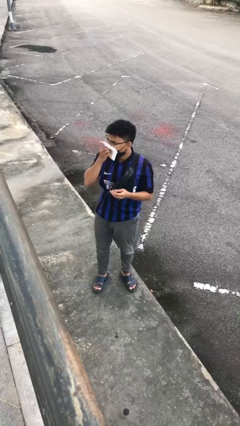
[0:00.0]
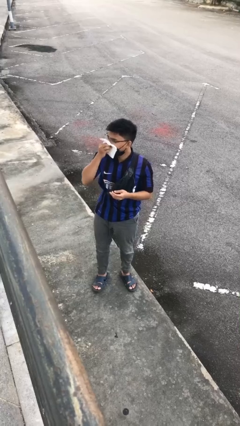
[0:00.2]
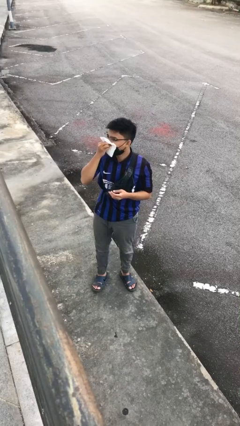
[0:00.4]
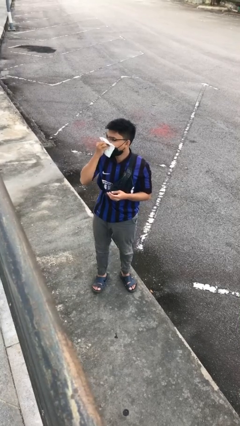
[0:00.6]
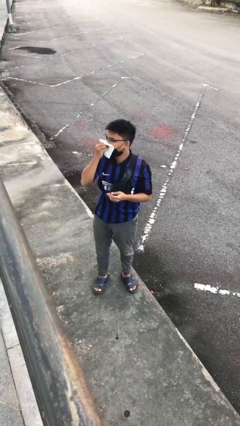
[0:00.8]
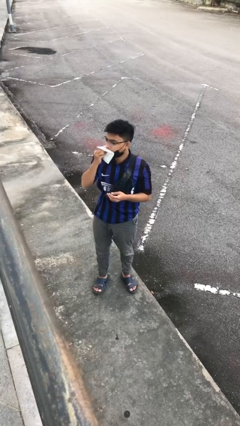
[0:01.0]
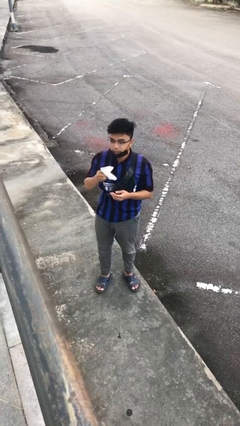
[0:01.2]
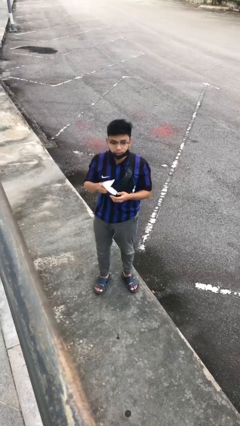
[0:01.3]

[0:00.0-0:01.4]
person blows nose

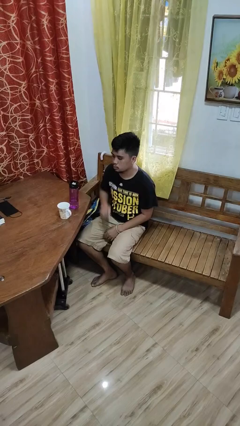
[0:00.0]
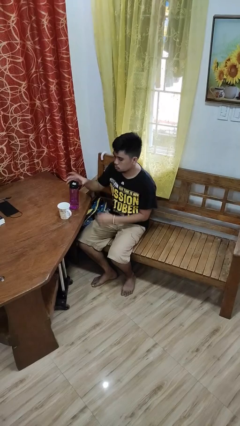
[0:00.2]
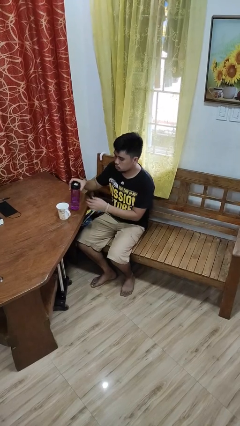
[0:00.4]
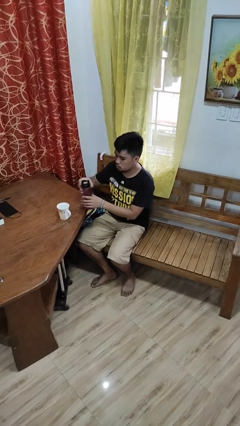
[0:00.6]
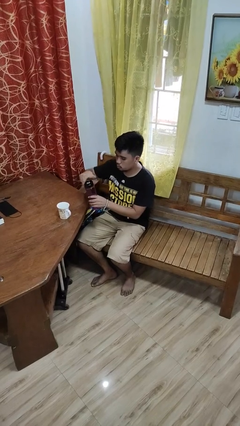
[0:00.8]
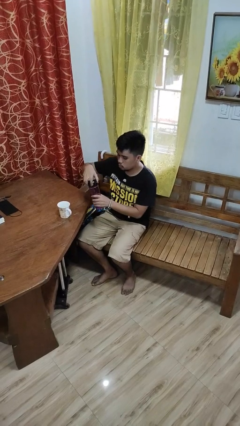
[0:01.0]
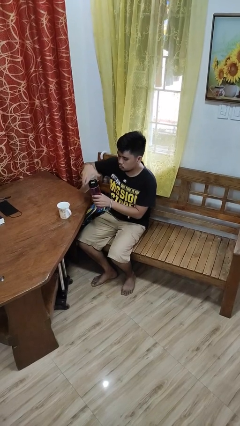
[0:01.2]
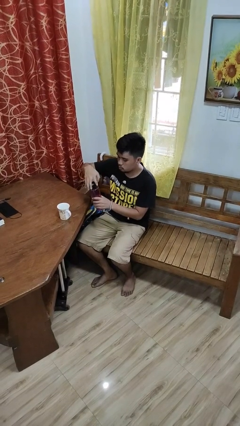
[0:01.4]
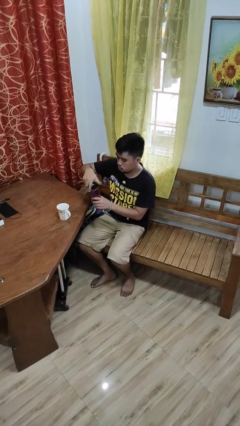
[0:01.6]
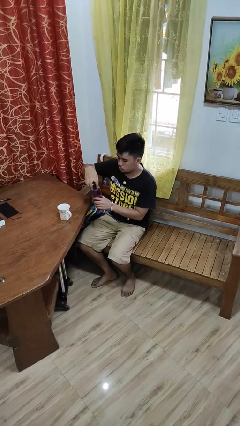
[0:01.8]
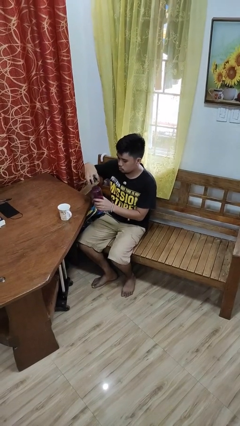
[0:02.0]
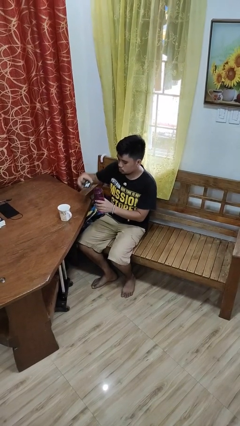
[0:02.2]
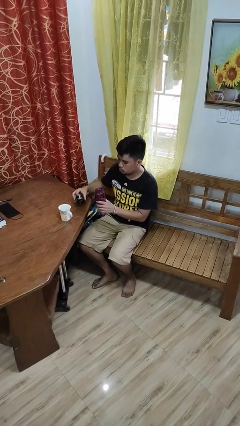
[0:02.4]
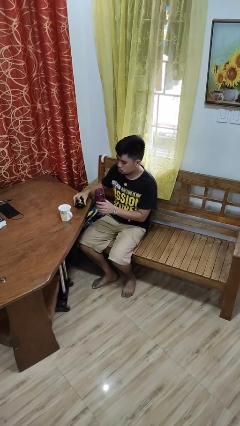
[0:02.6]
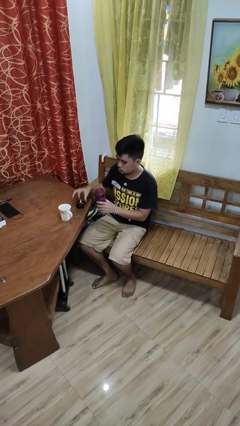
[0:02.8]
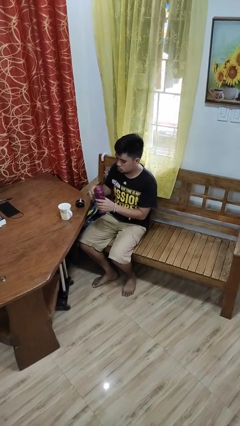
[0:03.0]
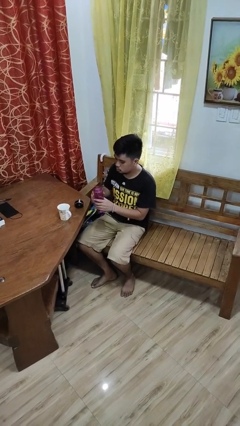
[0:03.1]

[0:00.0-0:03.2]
person unscrews lid from bottle

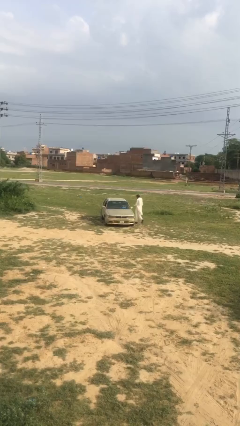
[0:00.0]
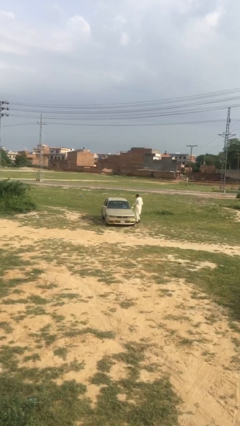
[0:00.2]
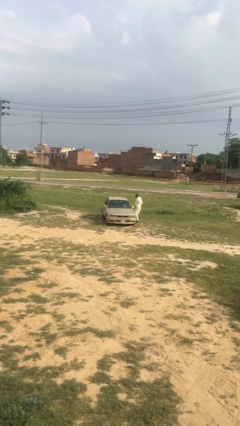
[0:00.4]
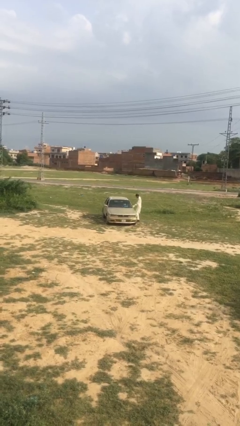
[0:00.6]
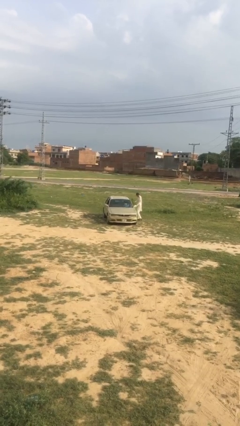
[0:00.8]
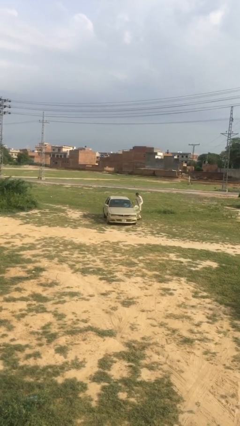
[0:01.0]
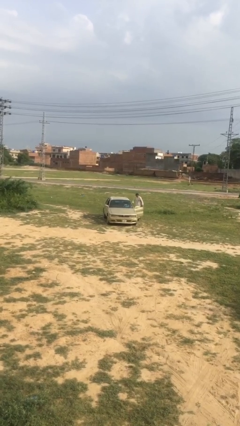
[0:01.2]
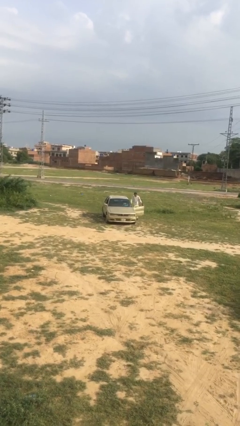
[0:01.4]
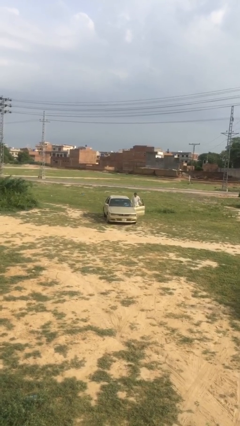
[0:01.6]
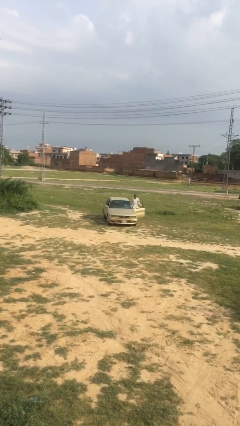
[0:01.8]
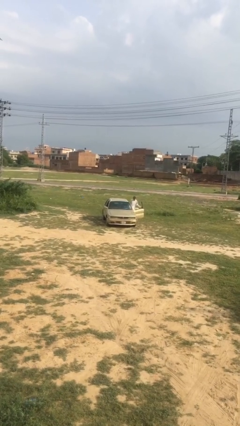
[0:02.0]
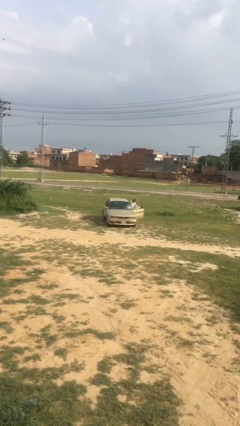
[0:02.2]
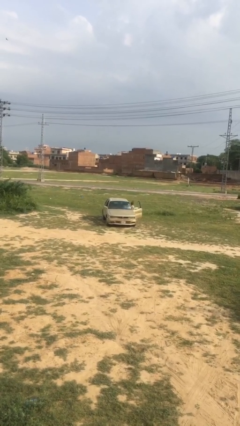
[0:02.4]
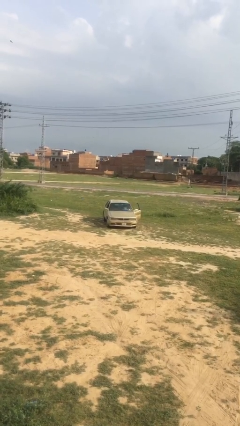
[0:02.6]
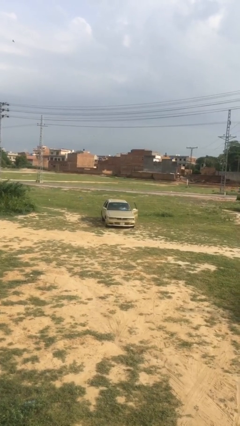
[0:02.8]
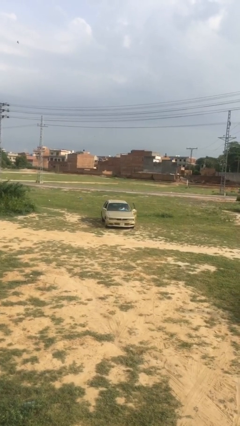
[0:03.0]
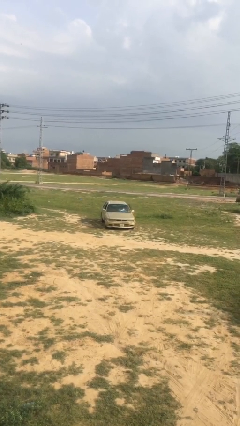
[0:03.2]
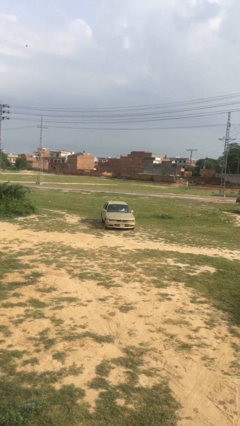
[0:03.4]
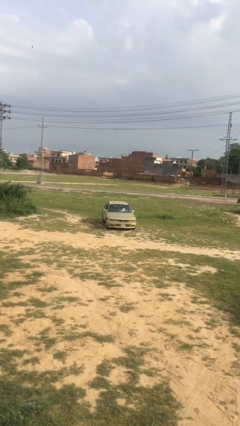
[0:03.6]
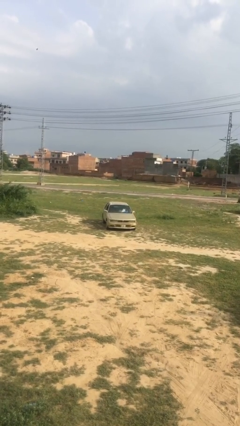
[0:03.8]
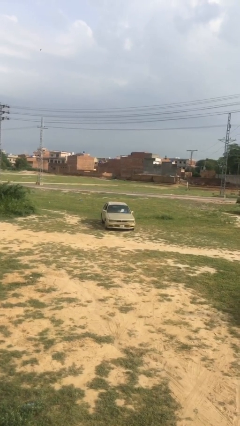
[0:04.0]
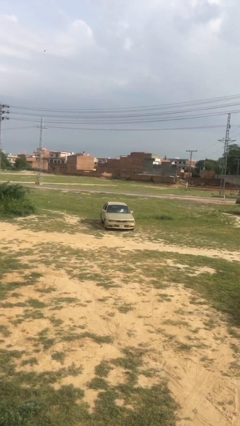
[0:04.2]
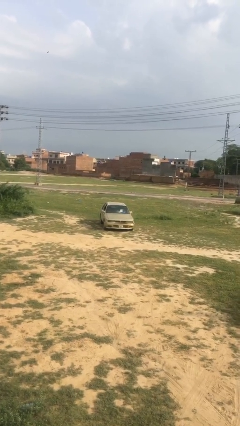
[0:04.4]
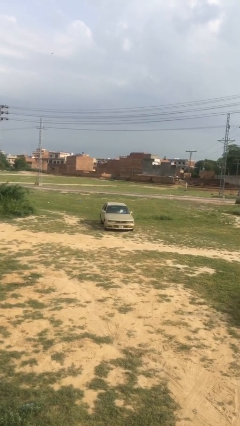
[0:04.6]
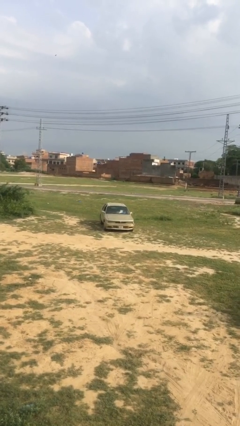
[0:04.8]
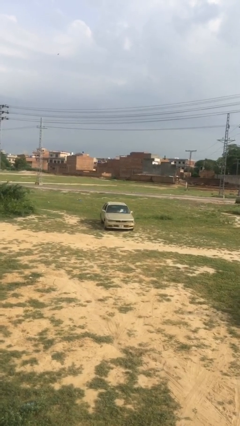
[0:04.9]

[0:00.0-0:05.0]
car picks up person

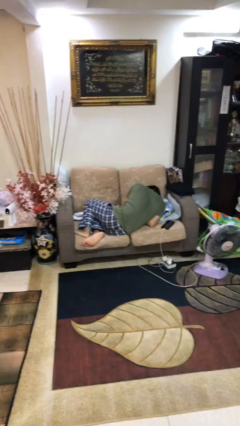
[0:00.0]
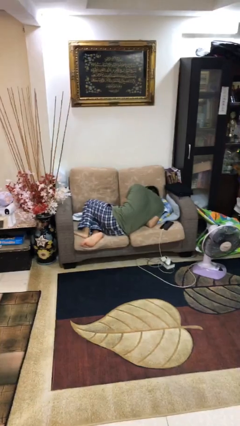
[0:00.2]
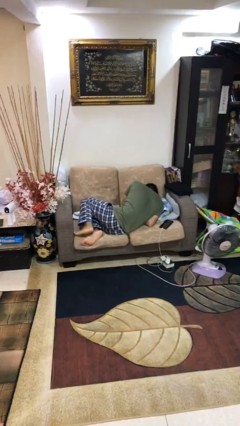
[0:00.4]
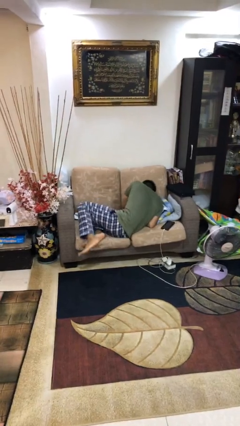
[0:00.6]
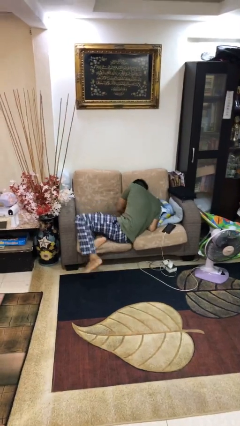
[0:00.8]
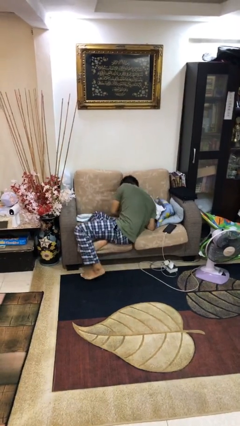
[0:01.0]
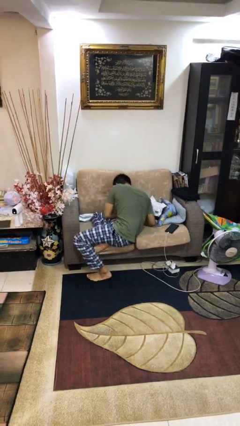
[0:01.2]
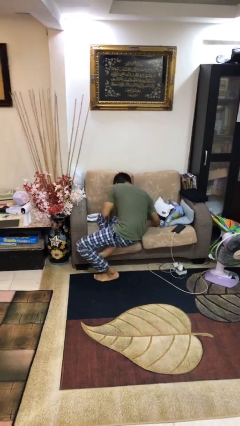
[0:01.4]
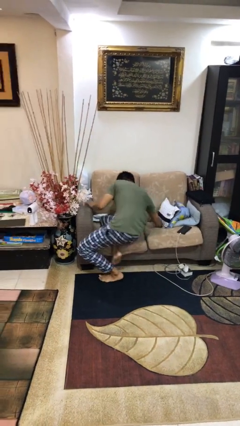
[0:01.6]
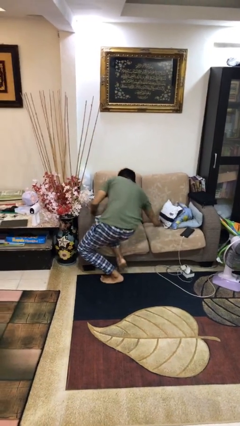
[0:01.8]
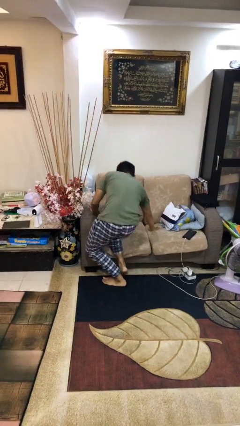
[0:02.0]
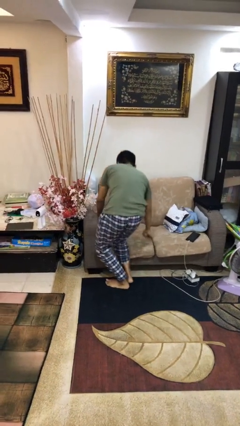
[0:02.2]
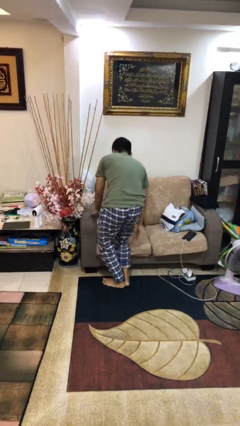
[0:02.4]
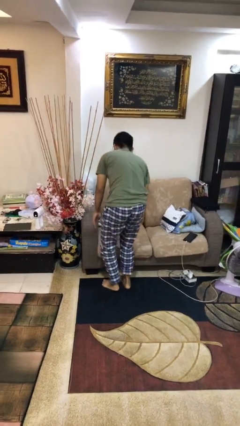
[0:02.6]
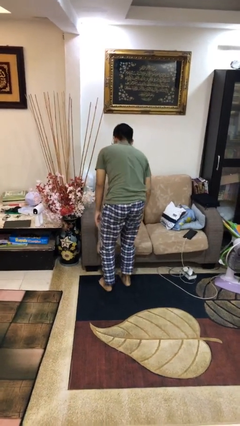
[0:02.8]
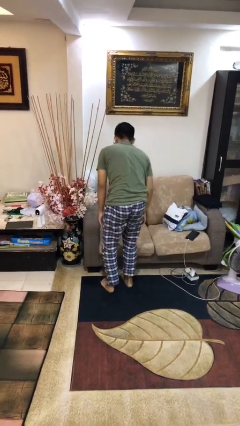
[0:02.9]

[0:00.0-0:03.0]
person stands up

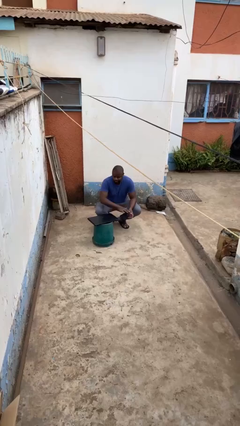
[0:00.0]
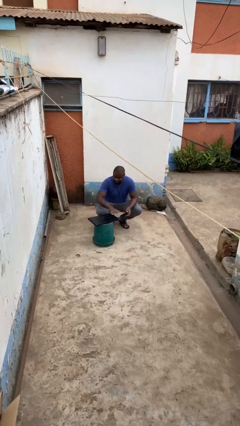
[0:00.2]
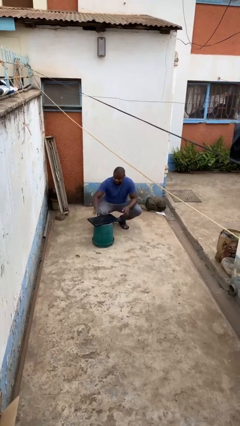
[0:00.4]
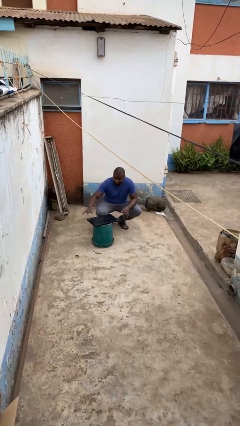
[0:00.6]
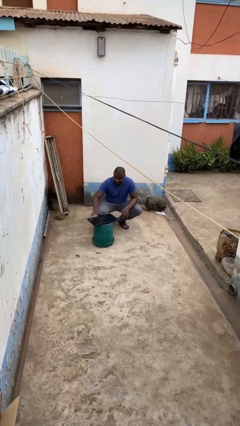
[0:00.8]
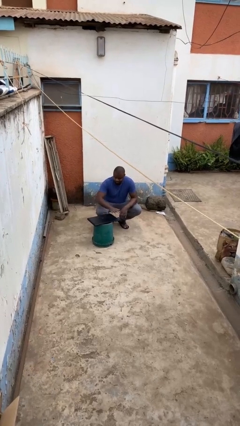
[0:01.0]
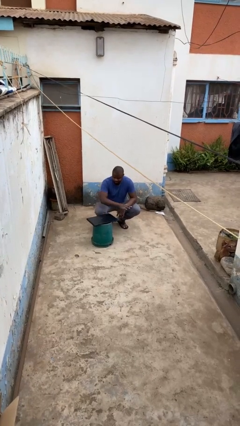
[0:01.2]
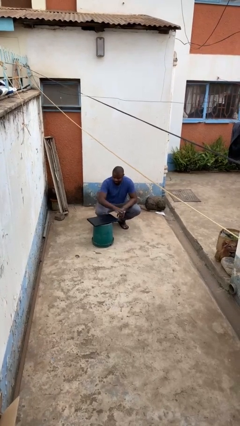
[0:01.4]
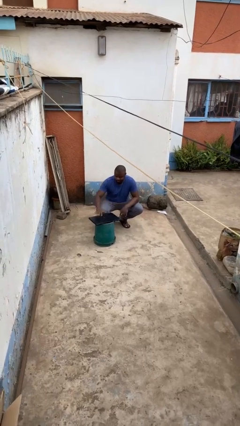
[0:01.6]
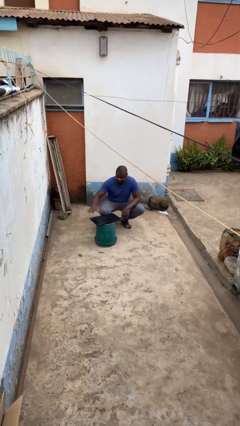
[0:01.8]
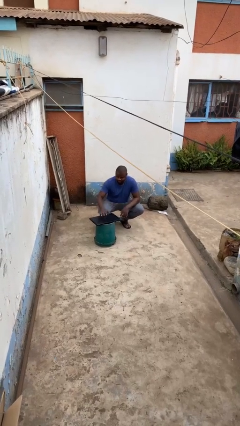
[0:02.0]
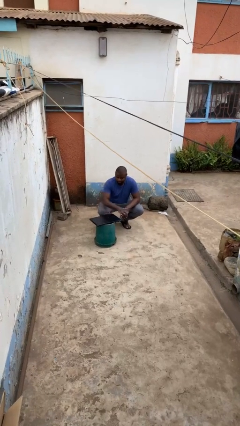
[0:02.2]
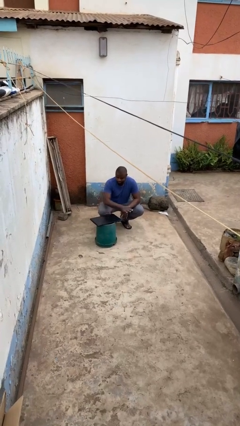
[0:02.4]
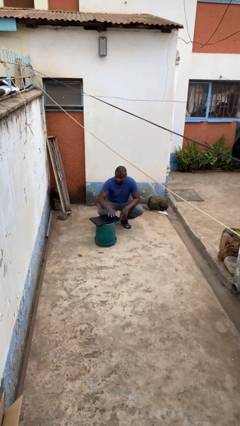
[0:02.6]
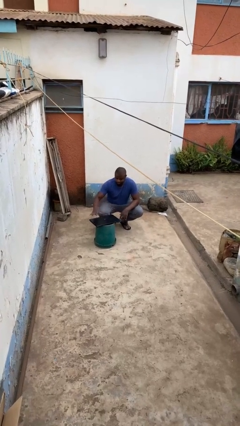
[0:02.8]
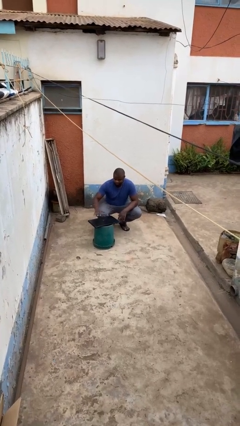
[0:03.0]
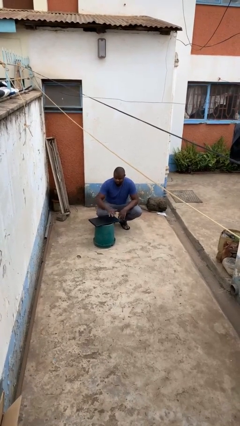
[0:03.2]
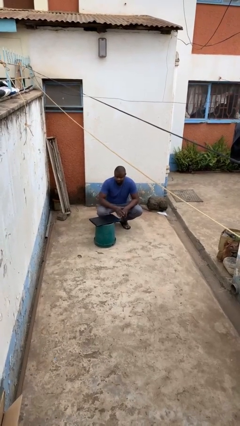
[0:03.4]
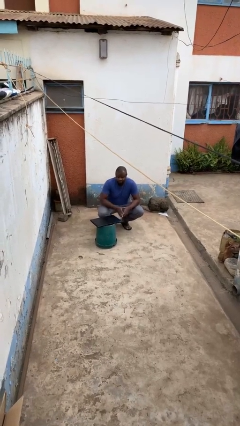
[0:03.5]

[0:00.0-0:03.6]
person waves hand over object

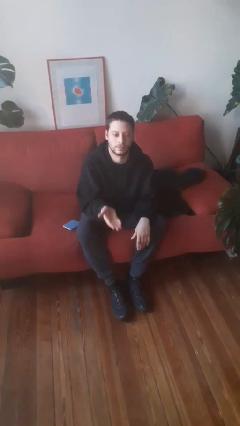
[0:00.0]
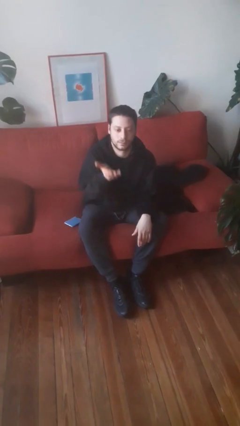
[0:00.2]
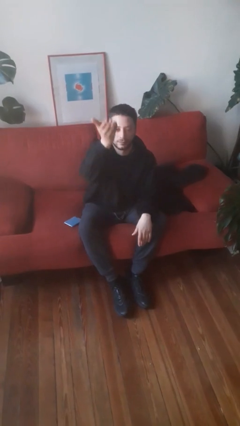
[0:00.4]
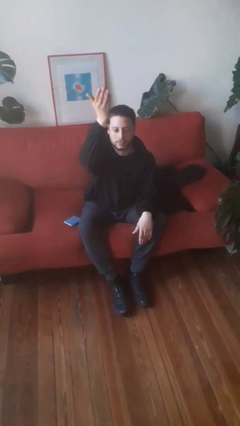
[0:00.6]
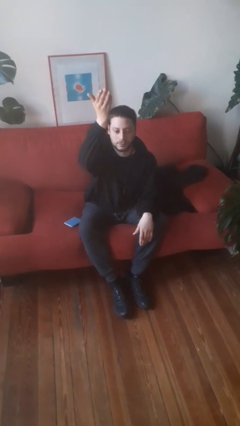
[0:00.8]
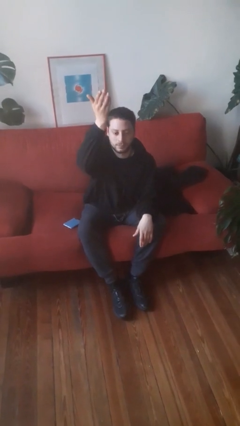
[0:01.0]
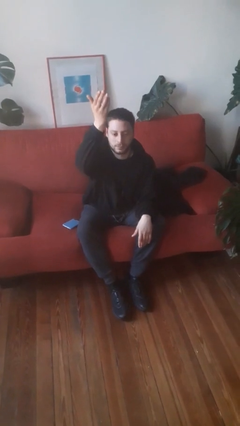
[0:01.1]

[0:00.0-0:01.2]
person gestures swipe up
